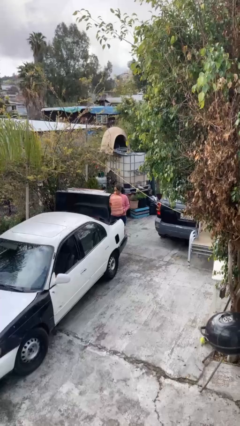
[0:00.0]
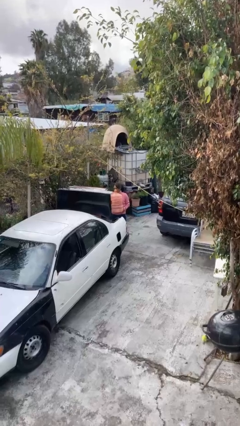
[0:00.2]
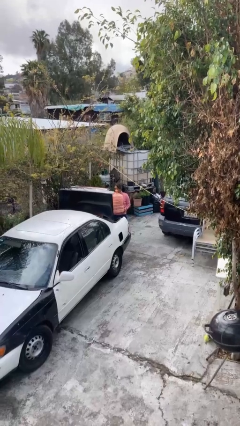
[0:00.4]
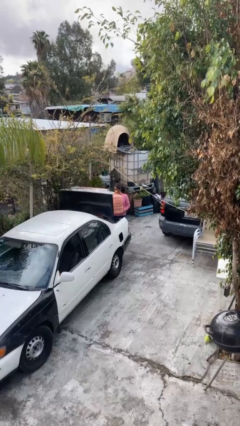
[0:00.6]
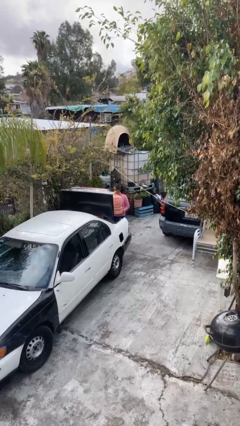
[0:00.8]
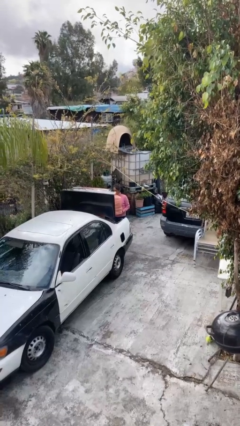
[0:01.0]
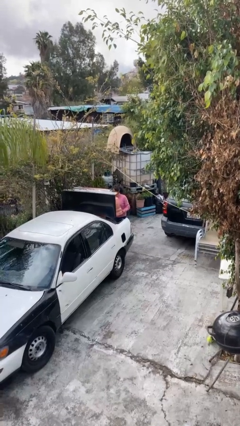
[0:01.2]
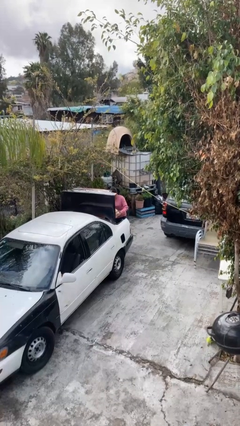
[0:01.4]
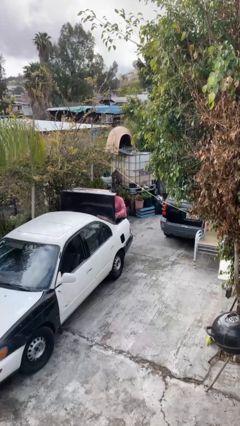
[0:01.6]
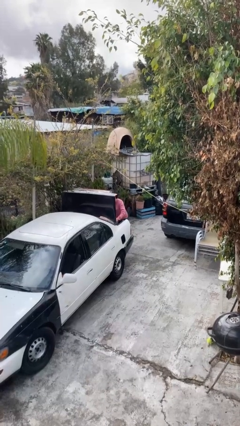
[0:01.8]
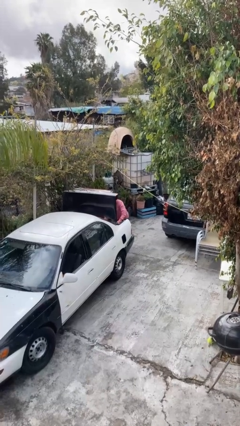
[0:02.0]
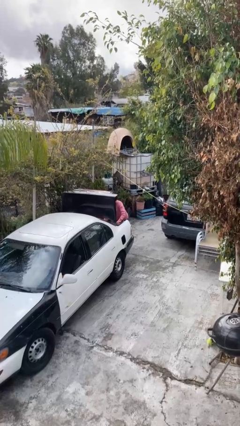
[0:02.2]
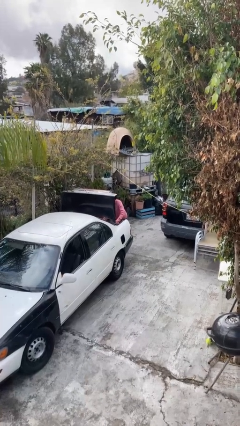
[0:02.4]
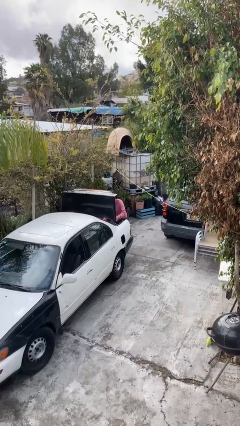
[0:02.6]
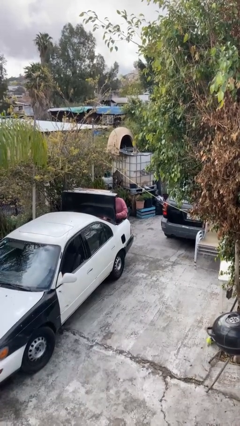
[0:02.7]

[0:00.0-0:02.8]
person loads car

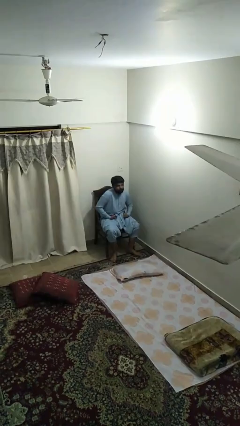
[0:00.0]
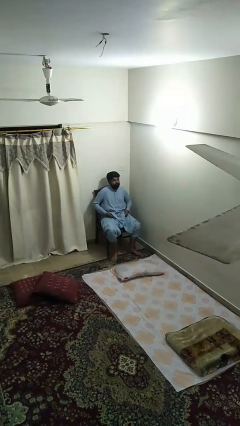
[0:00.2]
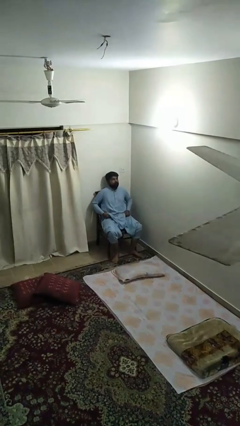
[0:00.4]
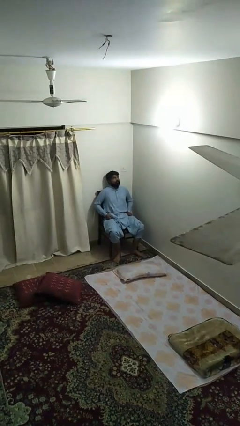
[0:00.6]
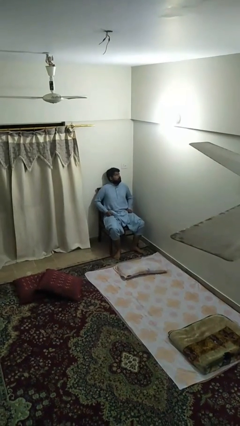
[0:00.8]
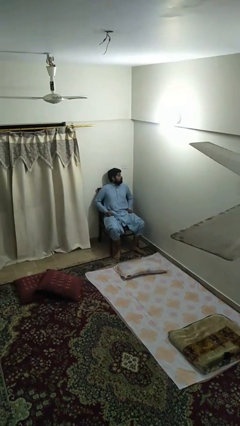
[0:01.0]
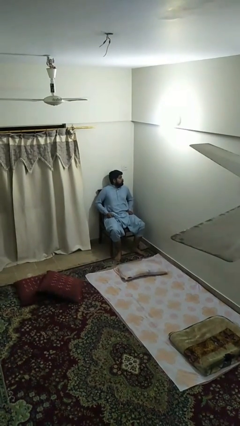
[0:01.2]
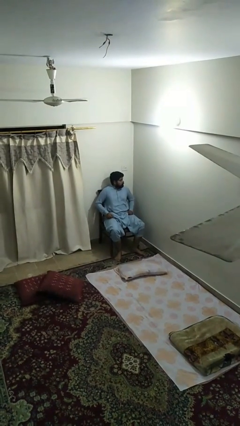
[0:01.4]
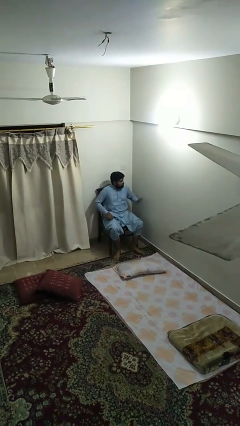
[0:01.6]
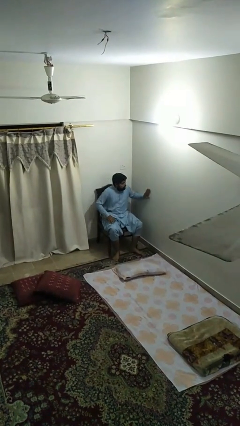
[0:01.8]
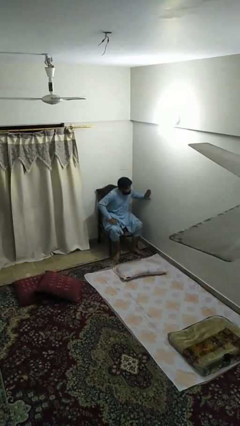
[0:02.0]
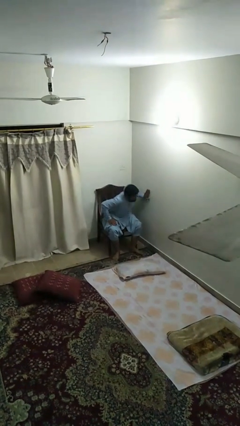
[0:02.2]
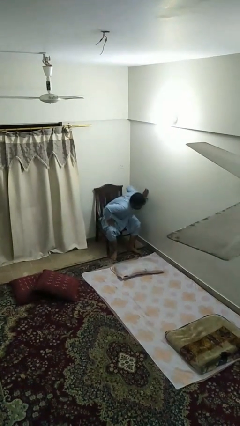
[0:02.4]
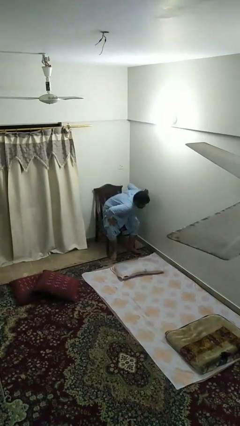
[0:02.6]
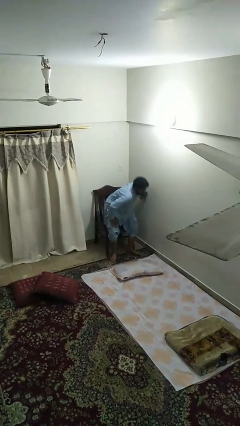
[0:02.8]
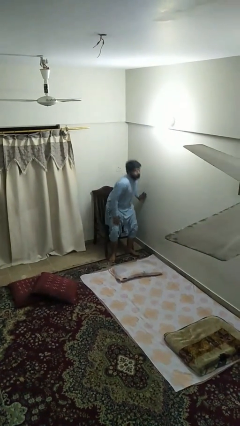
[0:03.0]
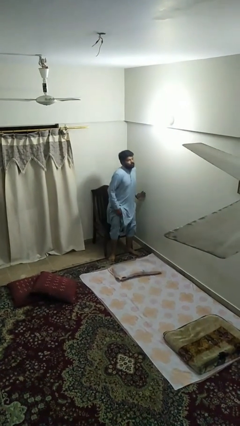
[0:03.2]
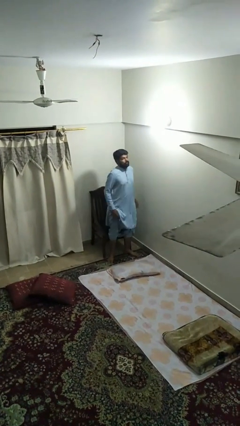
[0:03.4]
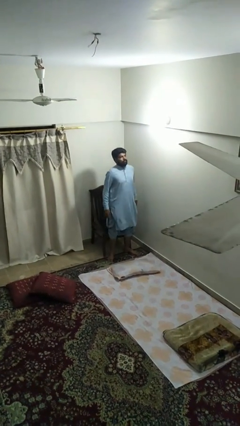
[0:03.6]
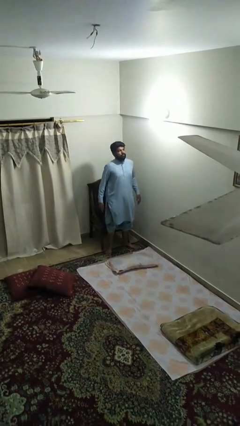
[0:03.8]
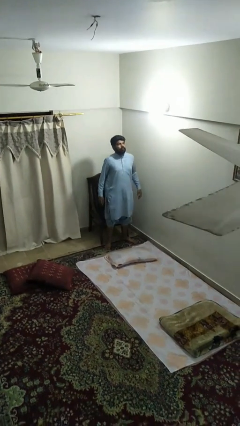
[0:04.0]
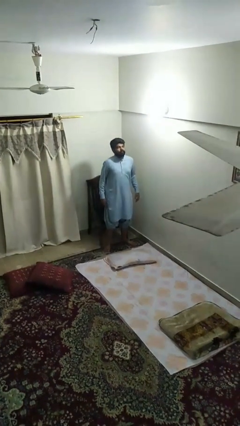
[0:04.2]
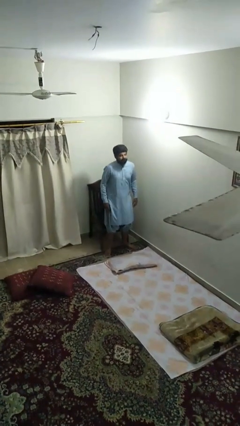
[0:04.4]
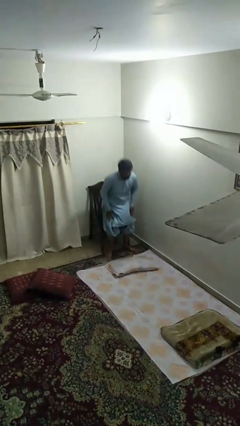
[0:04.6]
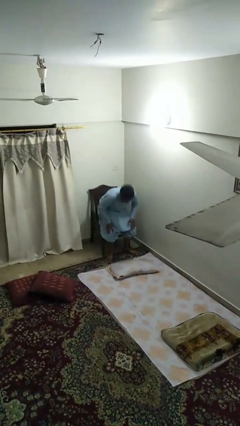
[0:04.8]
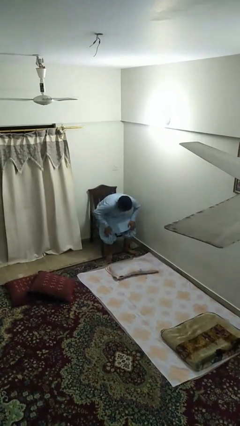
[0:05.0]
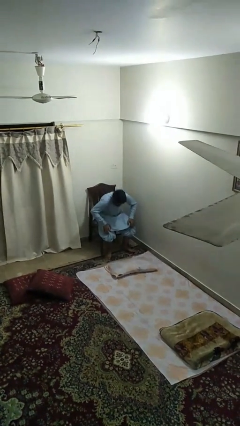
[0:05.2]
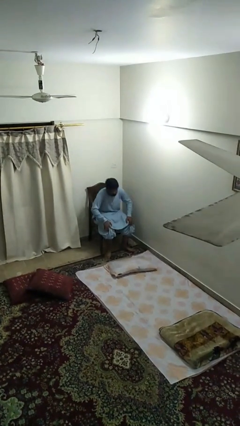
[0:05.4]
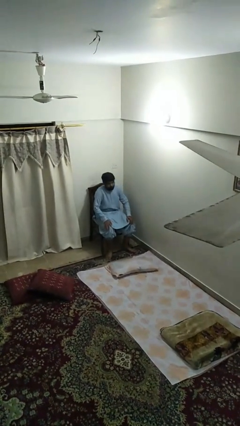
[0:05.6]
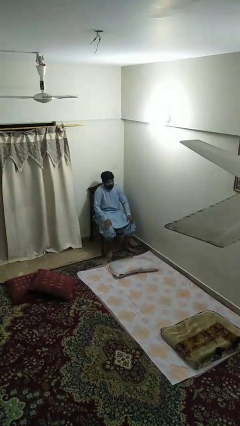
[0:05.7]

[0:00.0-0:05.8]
person stands up

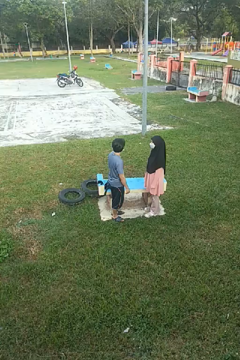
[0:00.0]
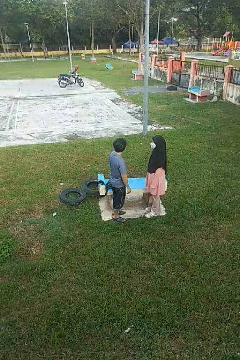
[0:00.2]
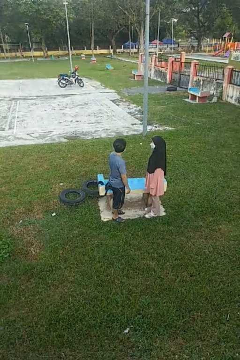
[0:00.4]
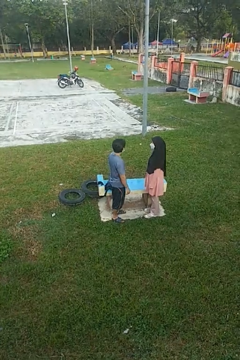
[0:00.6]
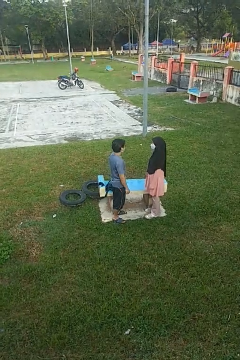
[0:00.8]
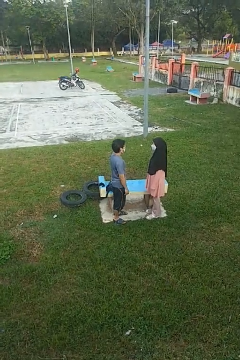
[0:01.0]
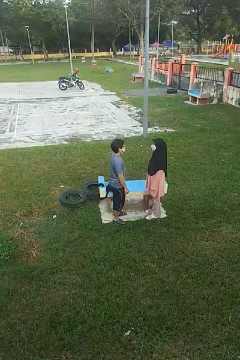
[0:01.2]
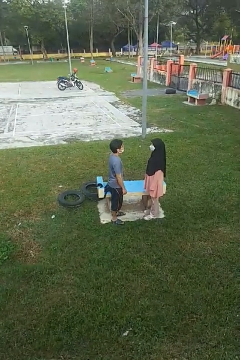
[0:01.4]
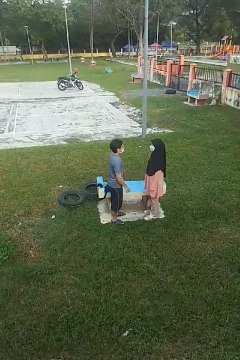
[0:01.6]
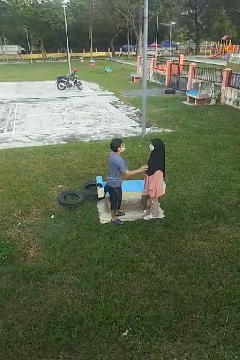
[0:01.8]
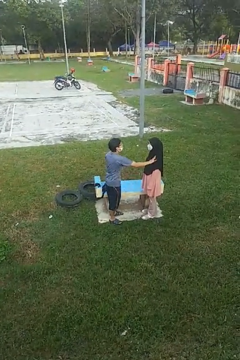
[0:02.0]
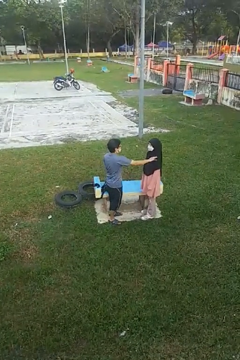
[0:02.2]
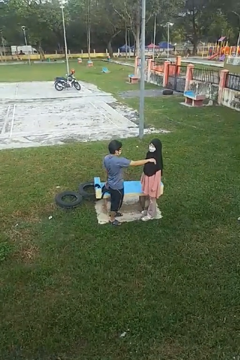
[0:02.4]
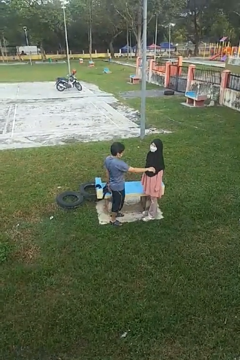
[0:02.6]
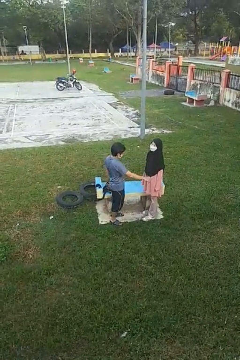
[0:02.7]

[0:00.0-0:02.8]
person shoves person

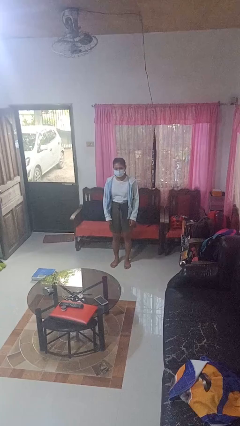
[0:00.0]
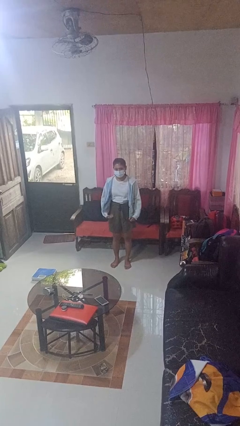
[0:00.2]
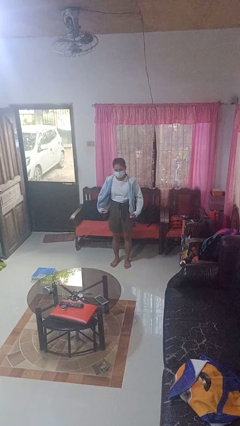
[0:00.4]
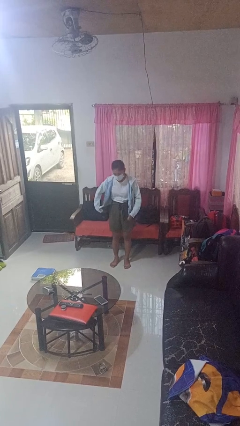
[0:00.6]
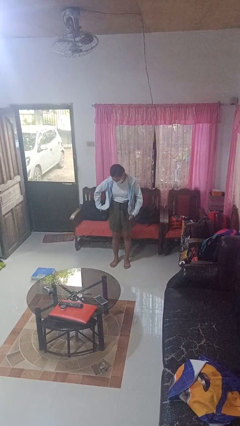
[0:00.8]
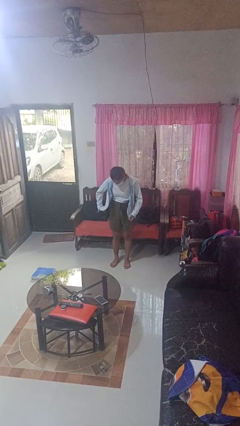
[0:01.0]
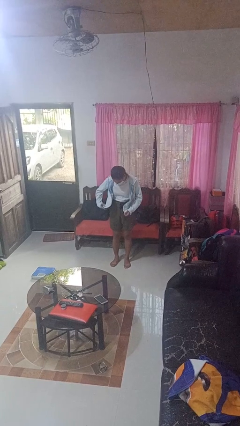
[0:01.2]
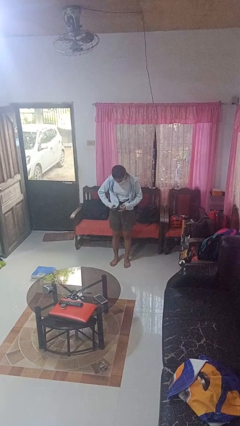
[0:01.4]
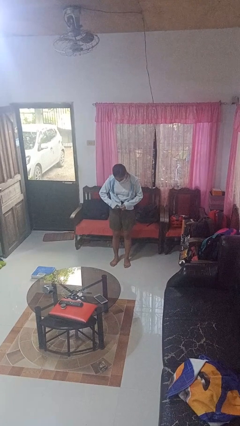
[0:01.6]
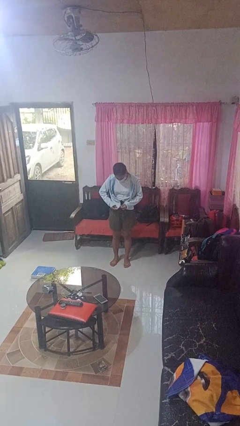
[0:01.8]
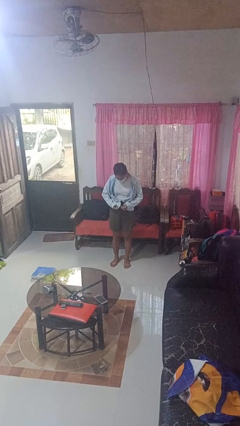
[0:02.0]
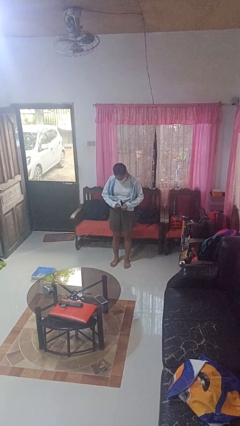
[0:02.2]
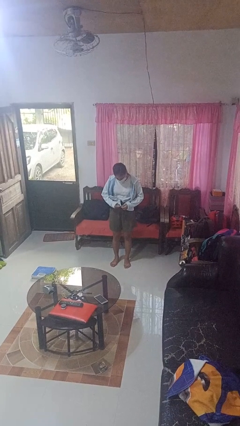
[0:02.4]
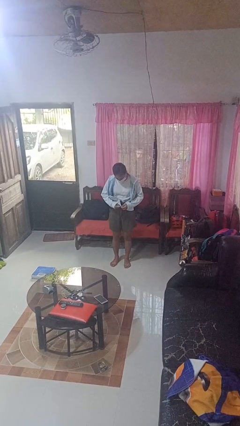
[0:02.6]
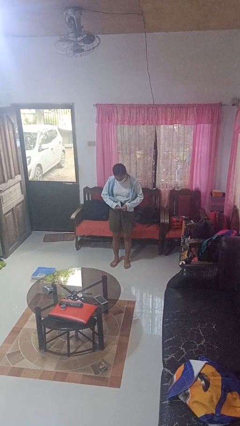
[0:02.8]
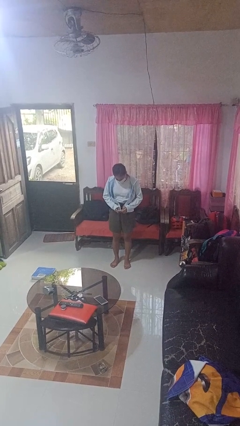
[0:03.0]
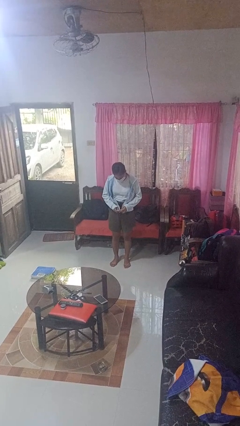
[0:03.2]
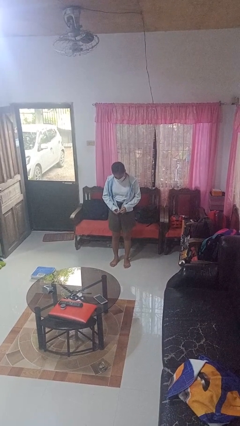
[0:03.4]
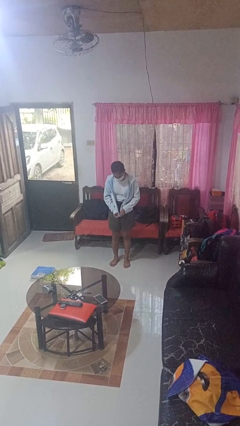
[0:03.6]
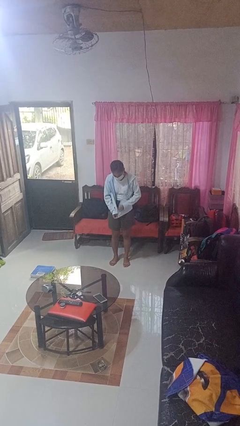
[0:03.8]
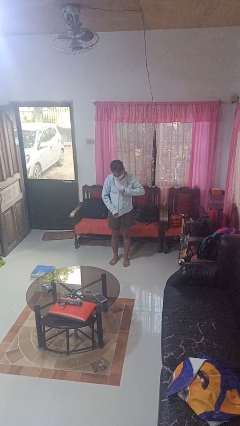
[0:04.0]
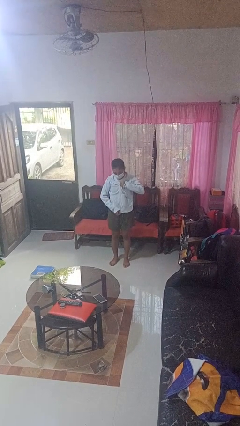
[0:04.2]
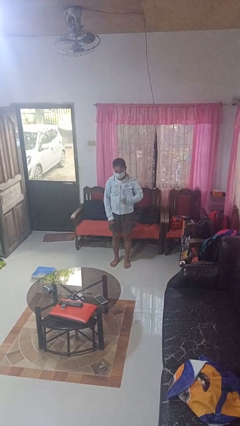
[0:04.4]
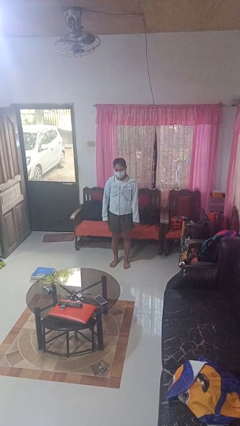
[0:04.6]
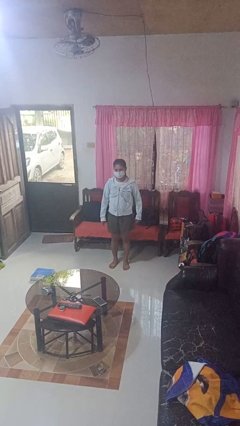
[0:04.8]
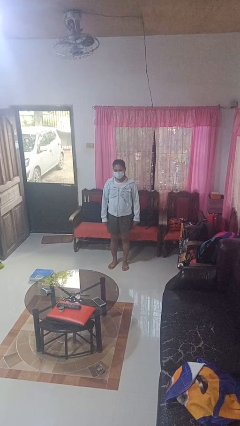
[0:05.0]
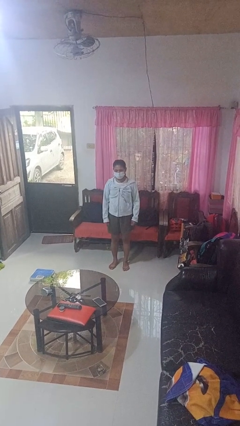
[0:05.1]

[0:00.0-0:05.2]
person zips up jacket

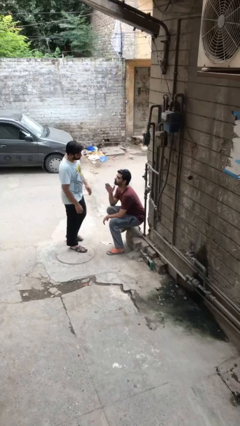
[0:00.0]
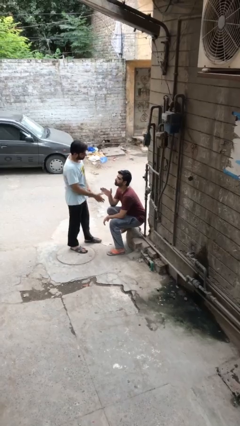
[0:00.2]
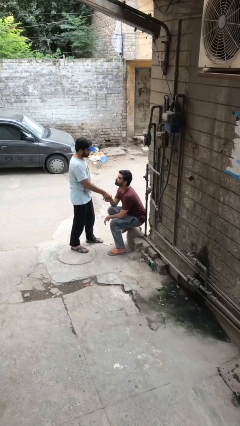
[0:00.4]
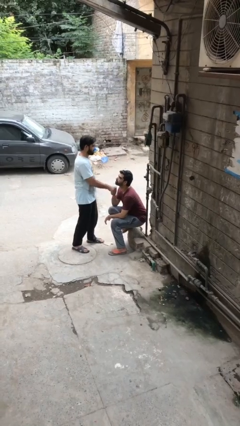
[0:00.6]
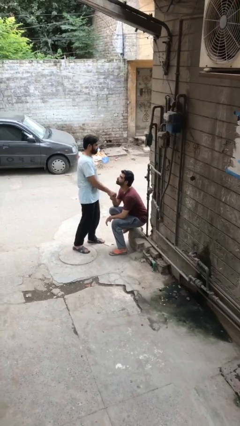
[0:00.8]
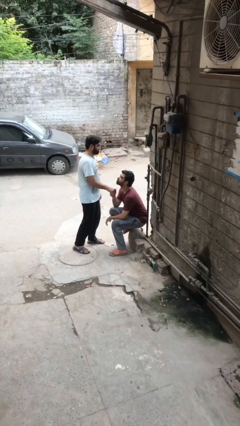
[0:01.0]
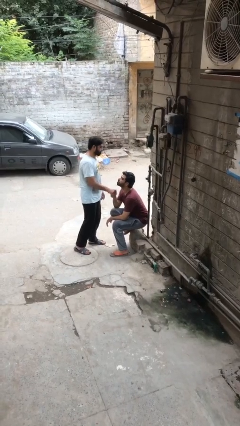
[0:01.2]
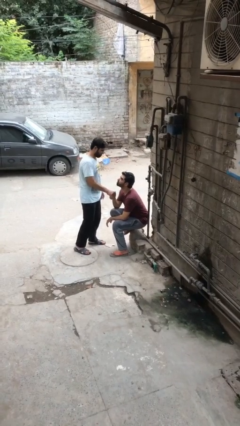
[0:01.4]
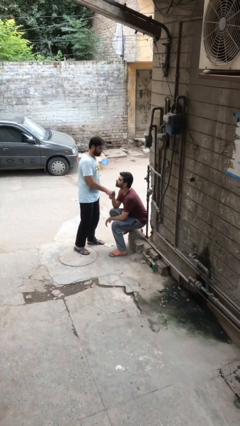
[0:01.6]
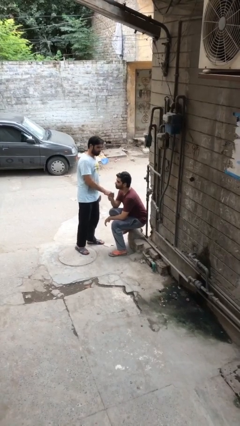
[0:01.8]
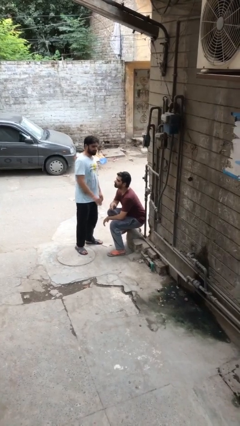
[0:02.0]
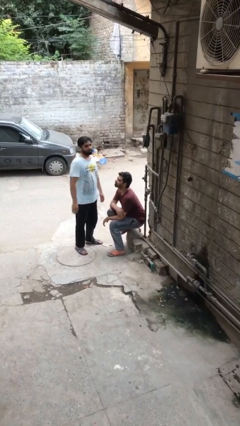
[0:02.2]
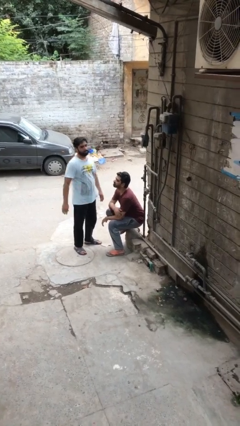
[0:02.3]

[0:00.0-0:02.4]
person shakes hand
